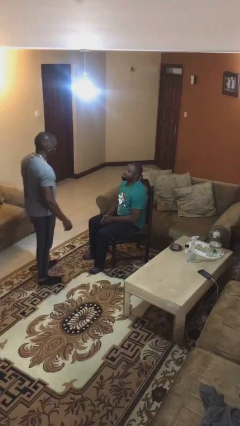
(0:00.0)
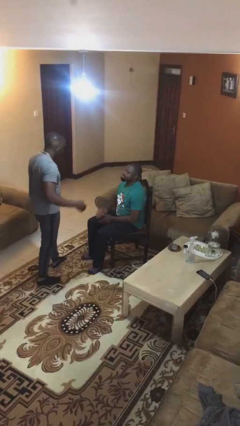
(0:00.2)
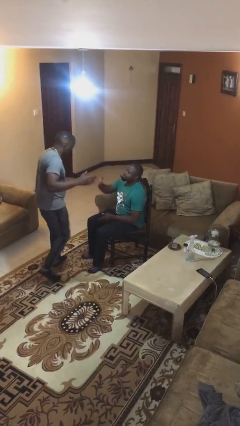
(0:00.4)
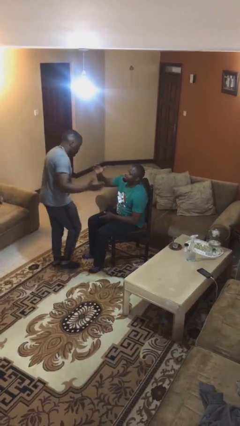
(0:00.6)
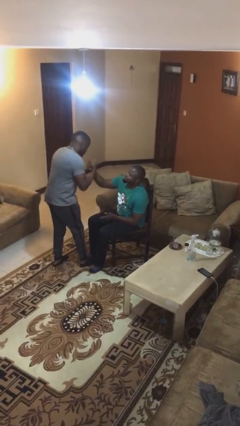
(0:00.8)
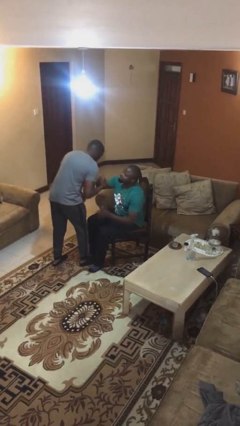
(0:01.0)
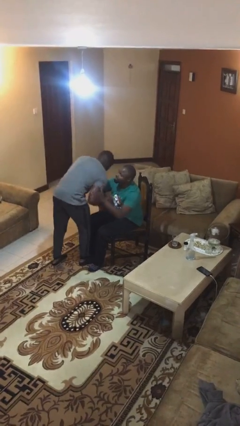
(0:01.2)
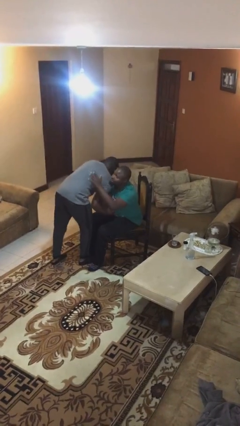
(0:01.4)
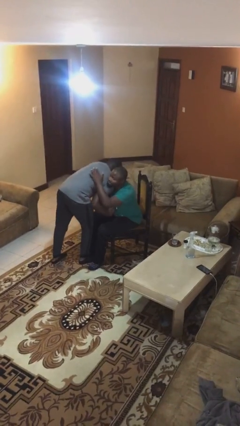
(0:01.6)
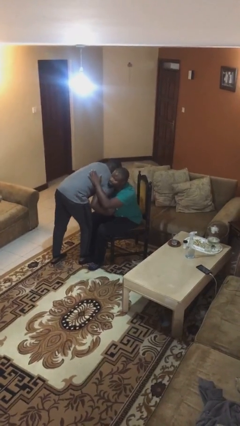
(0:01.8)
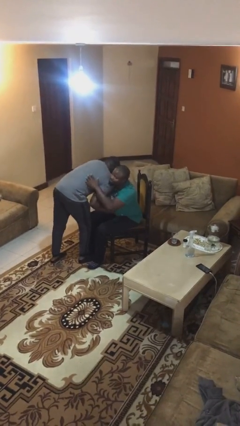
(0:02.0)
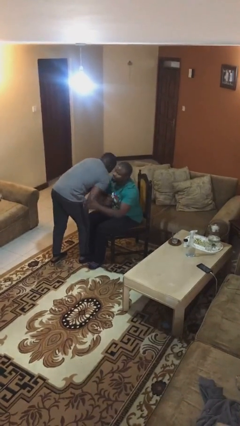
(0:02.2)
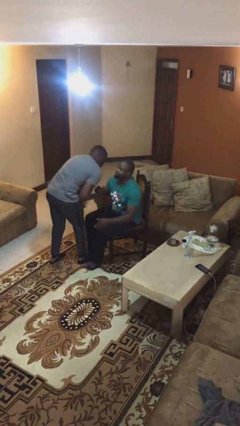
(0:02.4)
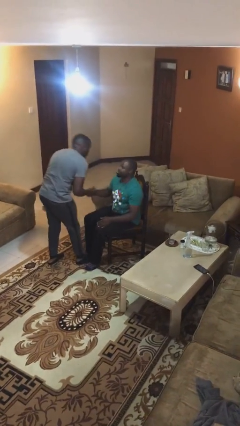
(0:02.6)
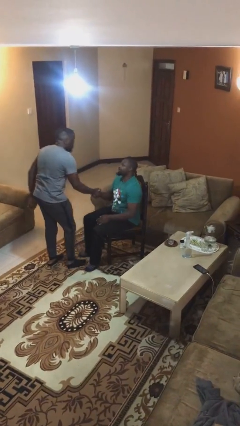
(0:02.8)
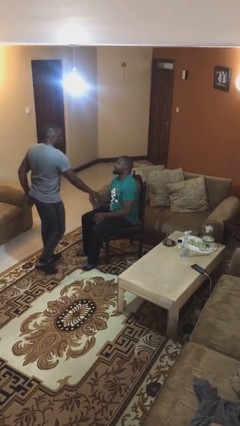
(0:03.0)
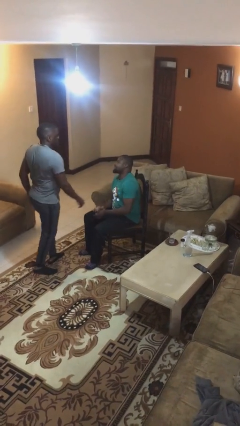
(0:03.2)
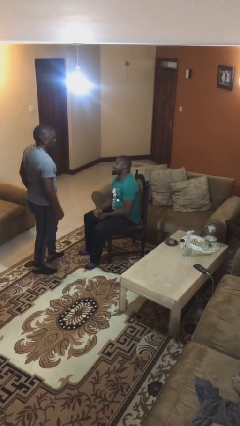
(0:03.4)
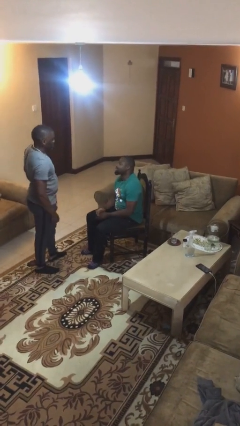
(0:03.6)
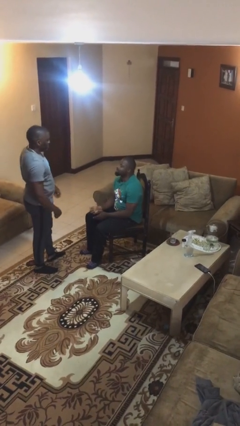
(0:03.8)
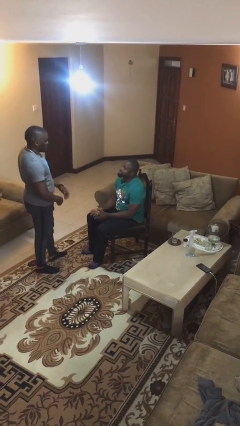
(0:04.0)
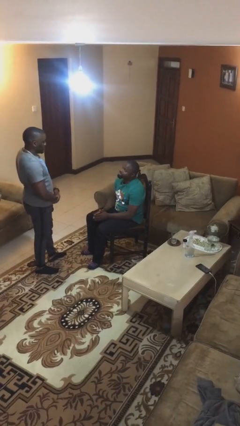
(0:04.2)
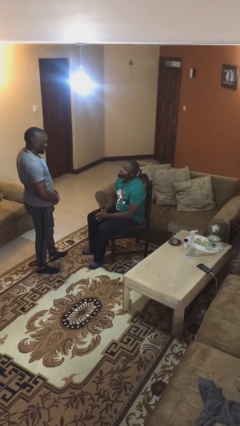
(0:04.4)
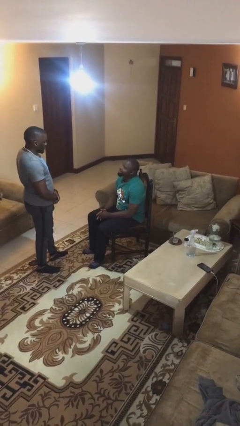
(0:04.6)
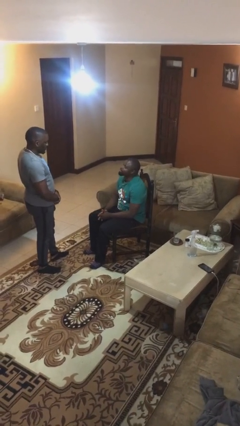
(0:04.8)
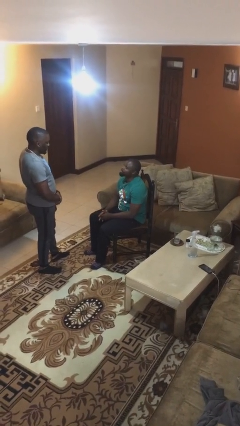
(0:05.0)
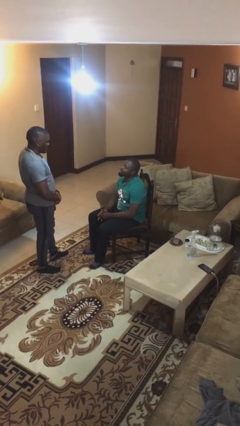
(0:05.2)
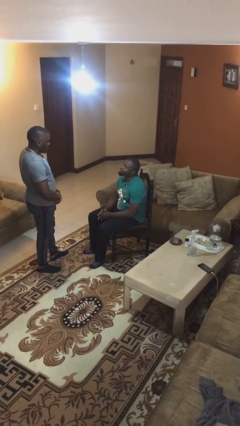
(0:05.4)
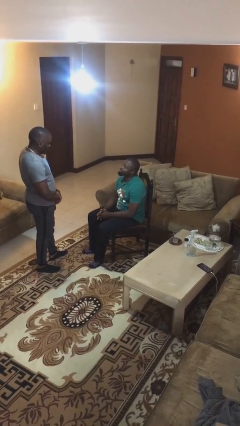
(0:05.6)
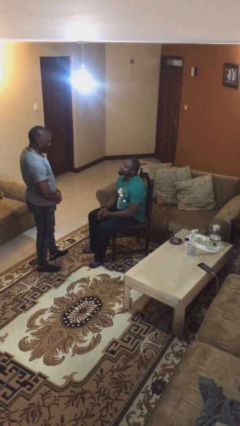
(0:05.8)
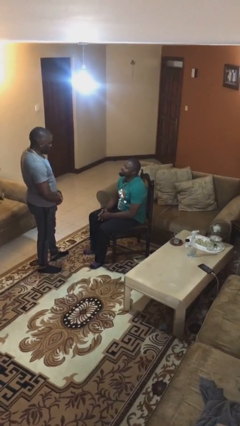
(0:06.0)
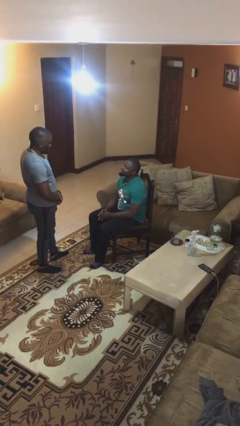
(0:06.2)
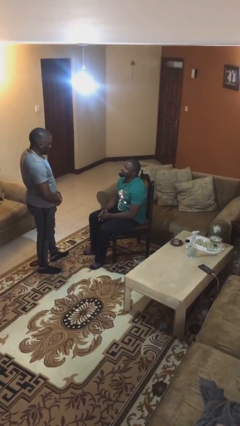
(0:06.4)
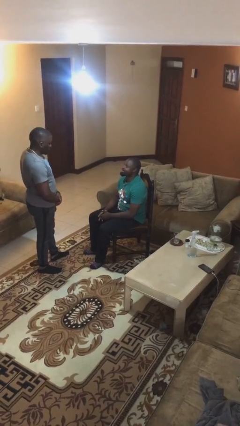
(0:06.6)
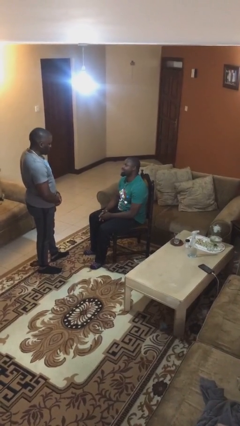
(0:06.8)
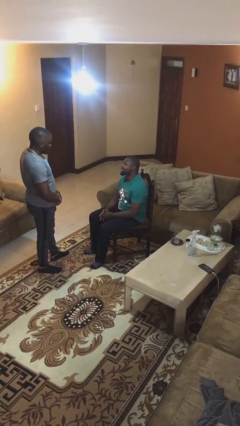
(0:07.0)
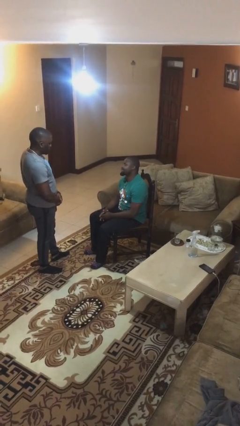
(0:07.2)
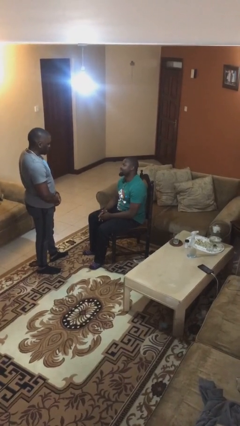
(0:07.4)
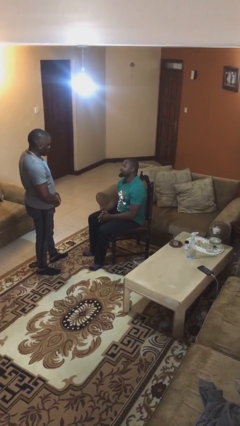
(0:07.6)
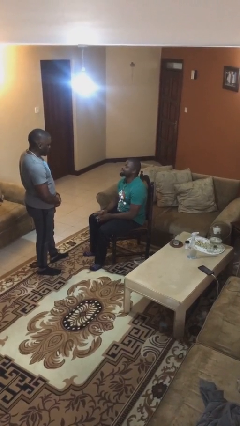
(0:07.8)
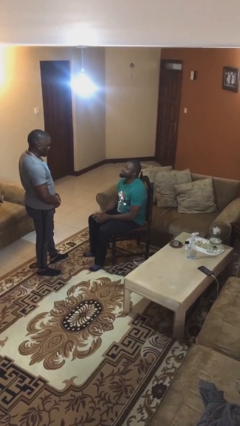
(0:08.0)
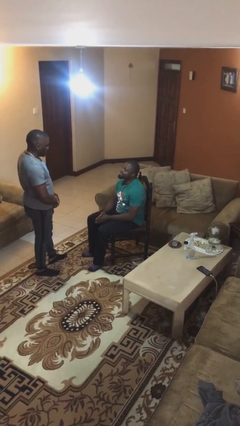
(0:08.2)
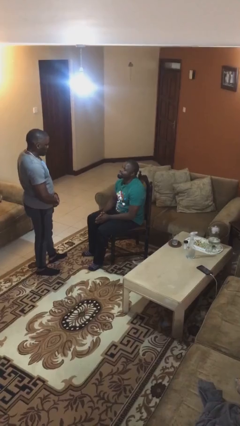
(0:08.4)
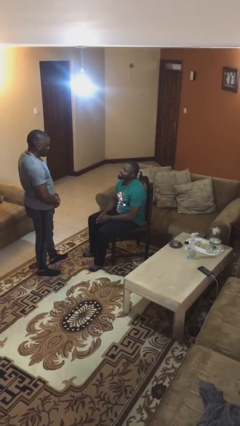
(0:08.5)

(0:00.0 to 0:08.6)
person embraces person

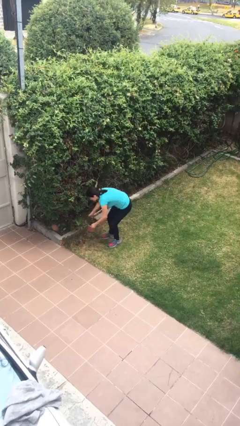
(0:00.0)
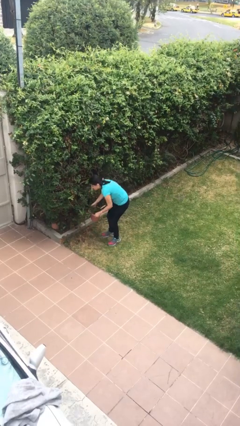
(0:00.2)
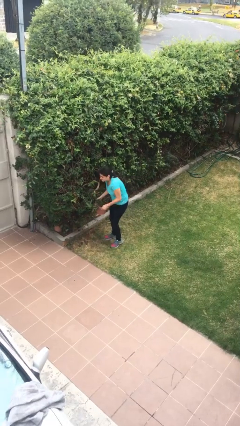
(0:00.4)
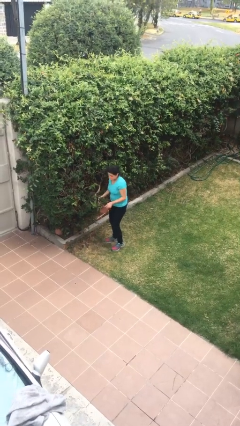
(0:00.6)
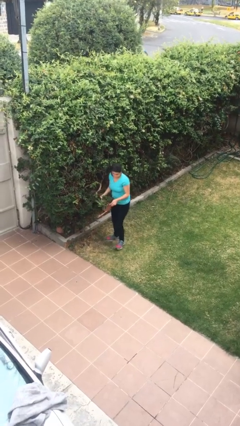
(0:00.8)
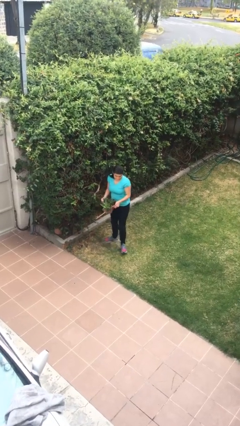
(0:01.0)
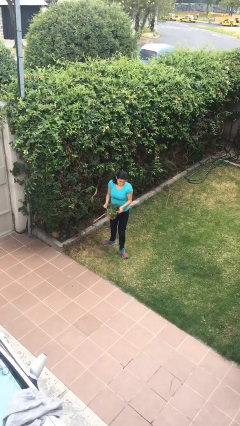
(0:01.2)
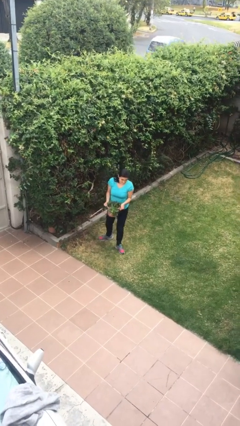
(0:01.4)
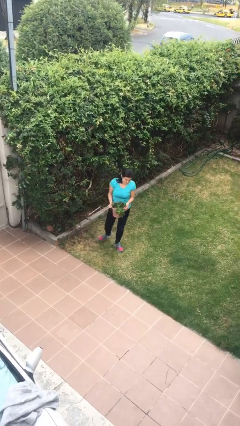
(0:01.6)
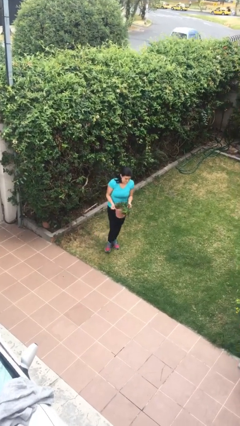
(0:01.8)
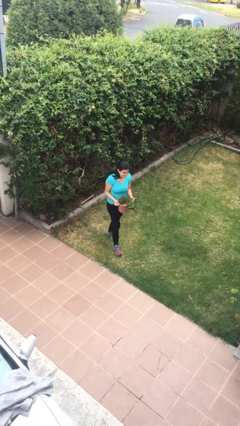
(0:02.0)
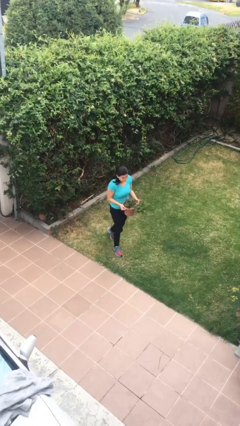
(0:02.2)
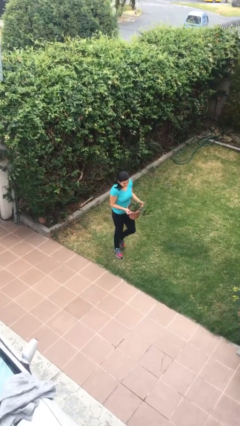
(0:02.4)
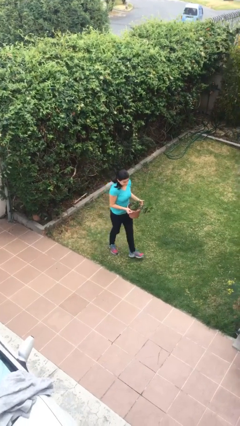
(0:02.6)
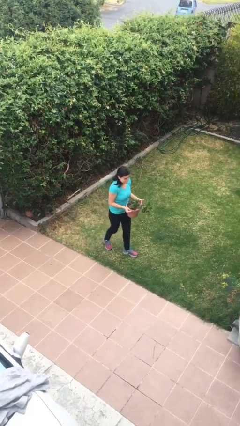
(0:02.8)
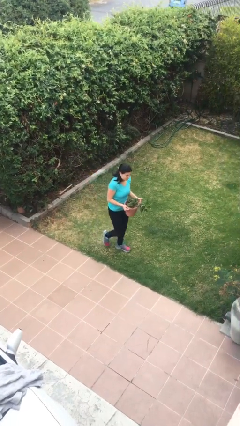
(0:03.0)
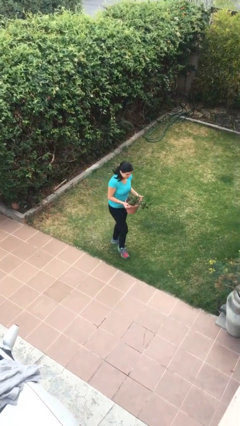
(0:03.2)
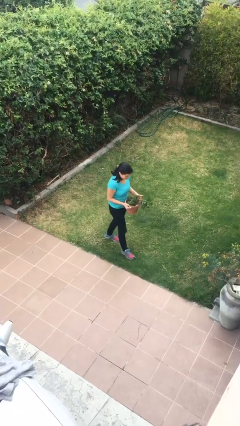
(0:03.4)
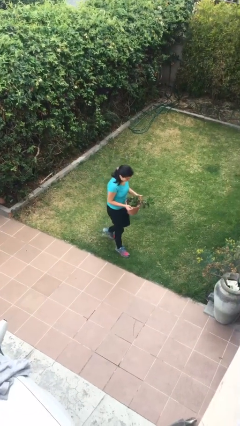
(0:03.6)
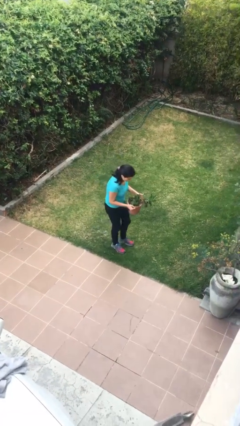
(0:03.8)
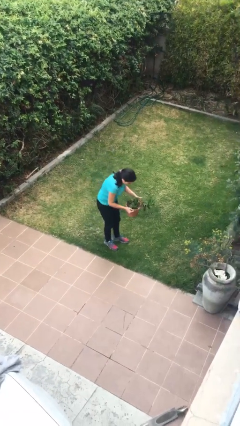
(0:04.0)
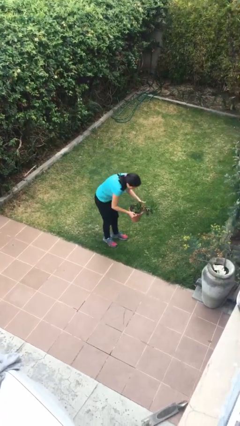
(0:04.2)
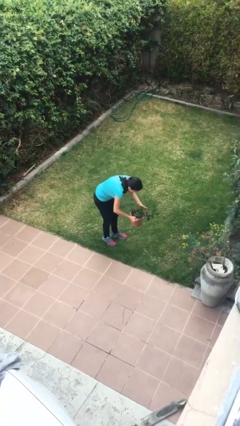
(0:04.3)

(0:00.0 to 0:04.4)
person carries heavy object

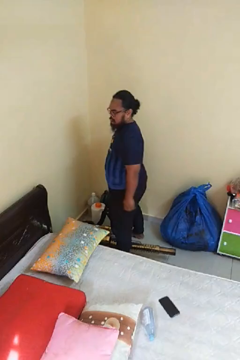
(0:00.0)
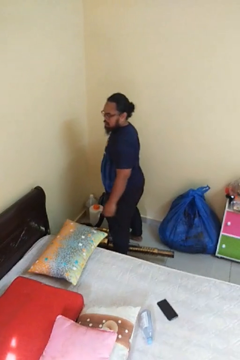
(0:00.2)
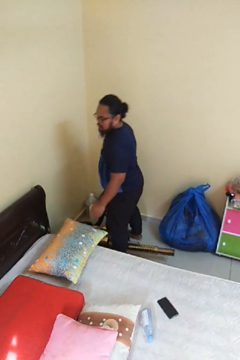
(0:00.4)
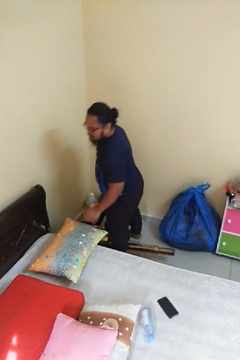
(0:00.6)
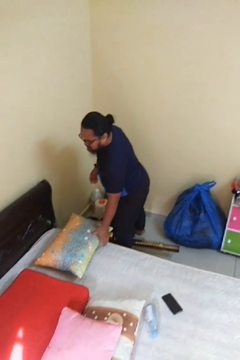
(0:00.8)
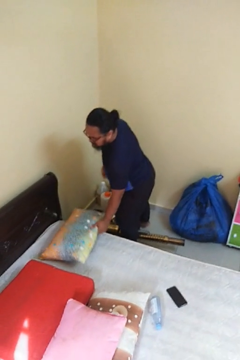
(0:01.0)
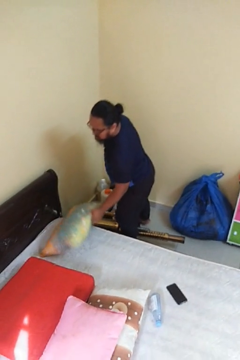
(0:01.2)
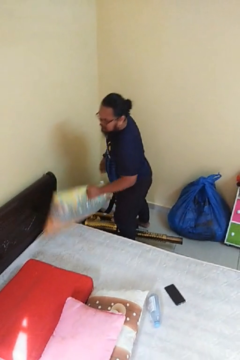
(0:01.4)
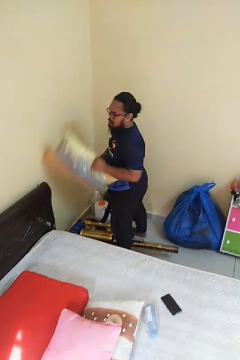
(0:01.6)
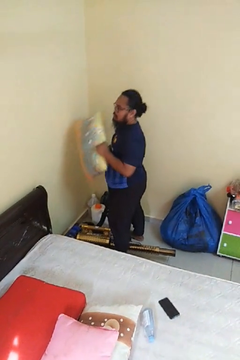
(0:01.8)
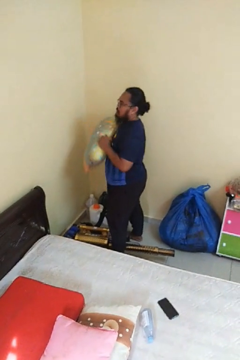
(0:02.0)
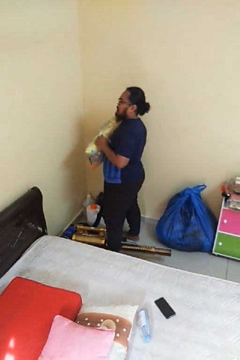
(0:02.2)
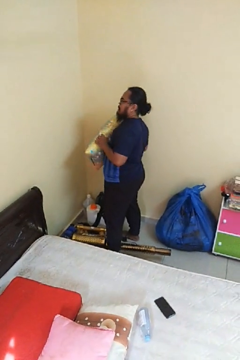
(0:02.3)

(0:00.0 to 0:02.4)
person picks up object from bed

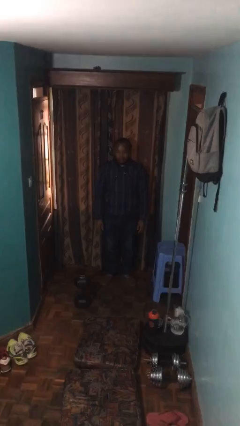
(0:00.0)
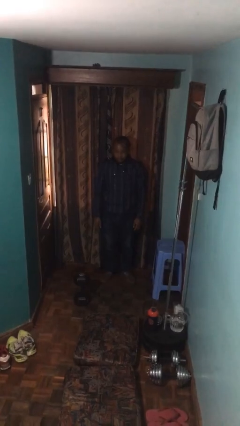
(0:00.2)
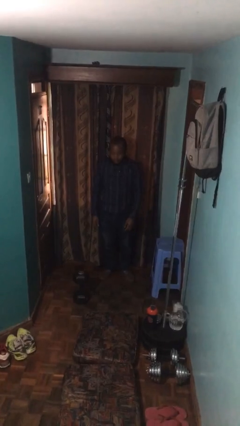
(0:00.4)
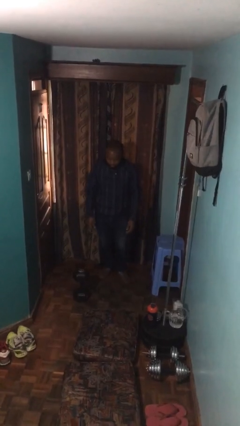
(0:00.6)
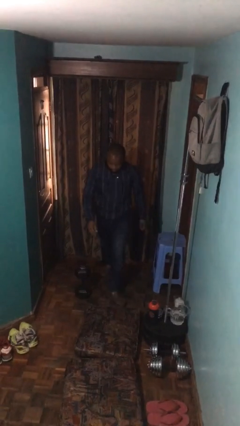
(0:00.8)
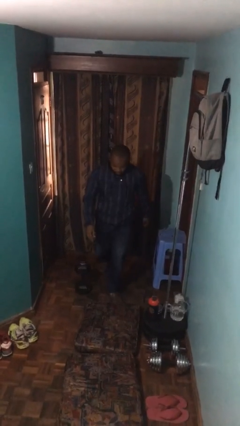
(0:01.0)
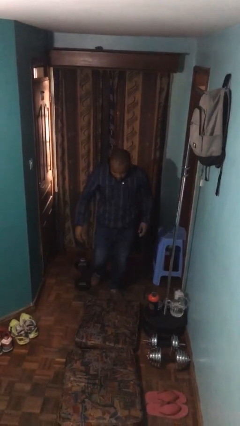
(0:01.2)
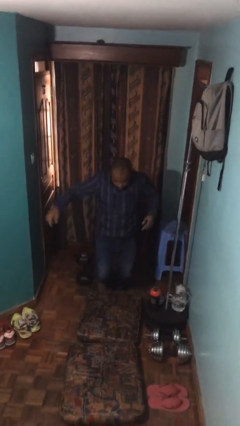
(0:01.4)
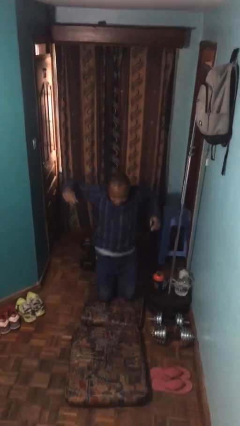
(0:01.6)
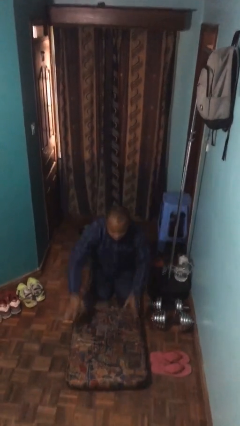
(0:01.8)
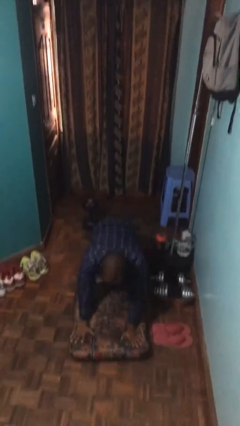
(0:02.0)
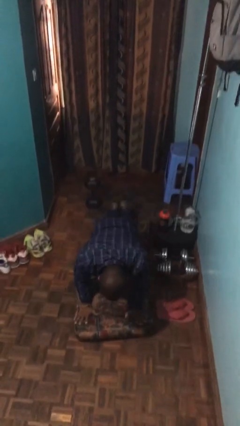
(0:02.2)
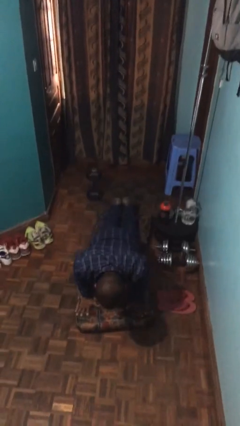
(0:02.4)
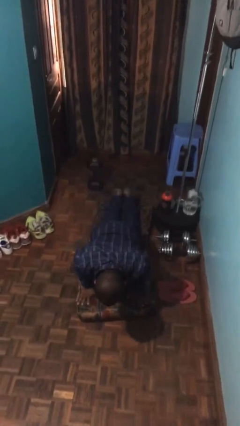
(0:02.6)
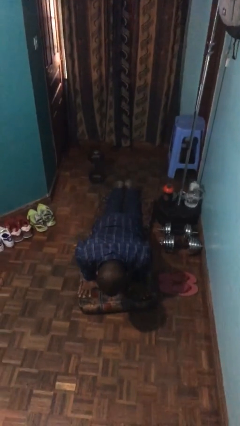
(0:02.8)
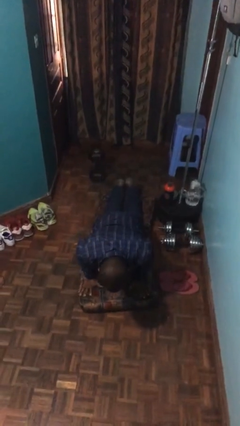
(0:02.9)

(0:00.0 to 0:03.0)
person trips on object on floor
